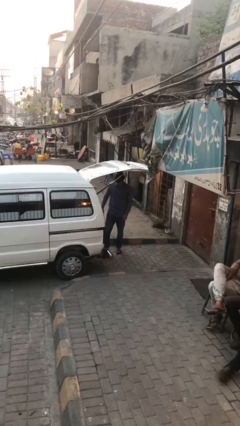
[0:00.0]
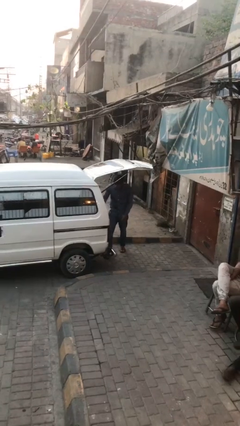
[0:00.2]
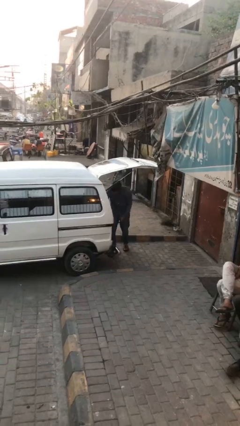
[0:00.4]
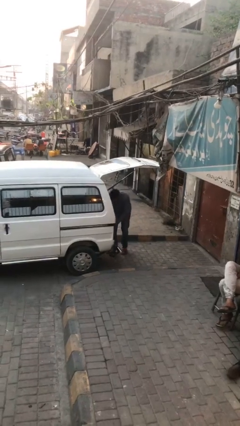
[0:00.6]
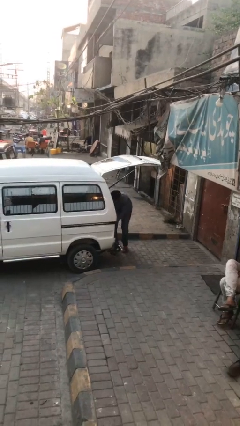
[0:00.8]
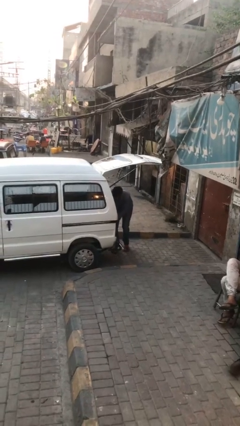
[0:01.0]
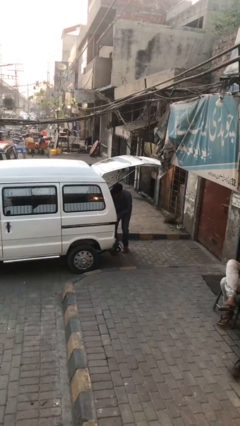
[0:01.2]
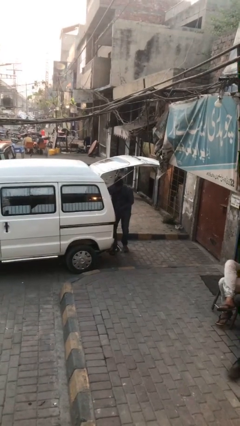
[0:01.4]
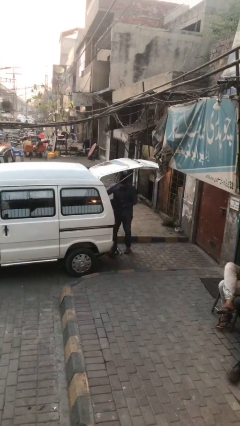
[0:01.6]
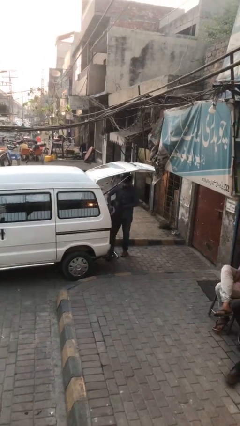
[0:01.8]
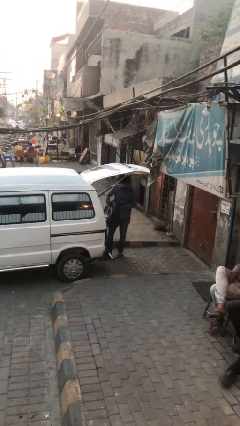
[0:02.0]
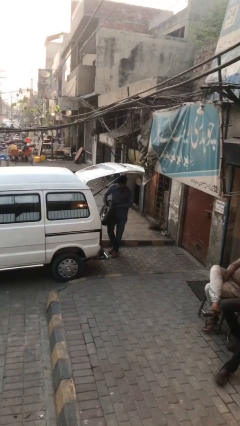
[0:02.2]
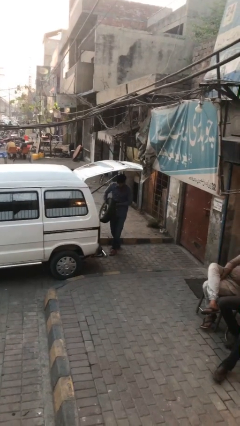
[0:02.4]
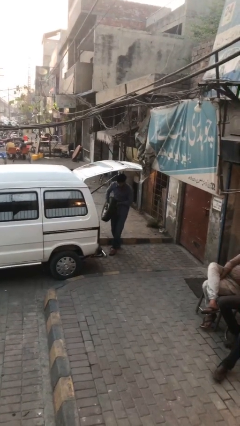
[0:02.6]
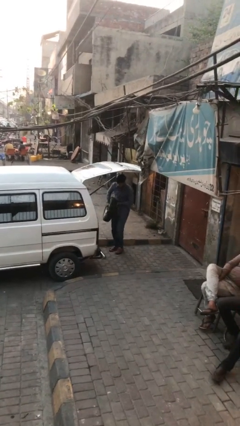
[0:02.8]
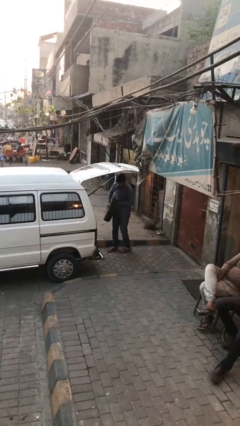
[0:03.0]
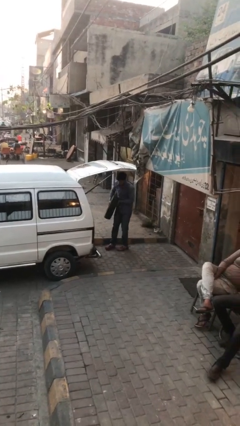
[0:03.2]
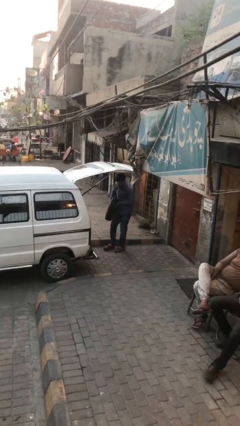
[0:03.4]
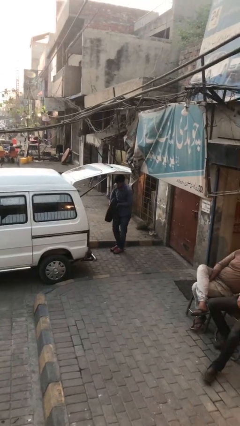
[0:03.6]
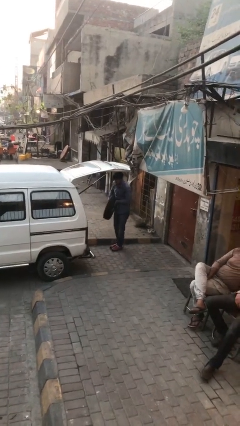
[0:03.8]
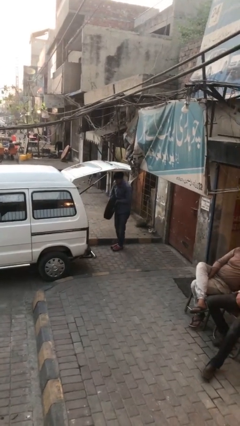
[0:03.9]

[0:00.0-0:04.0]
person unloads car

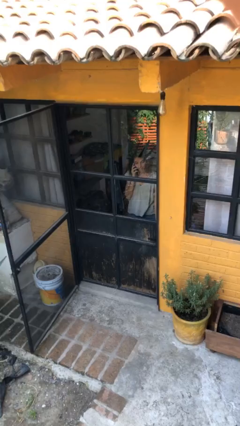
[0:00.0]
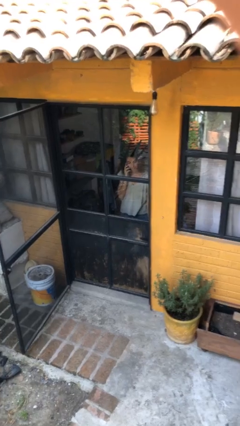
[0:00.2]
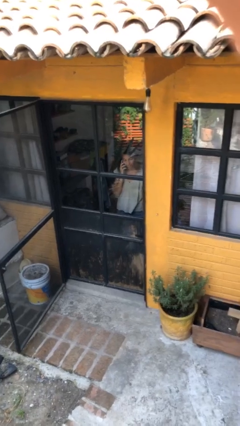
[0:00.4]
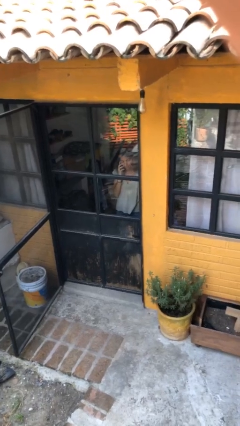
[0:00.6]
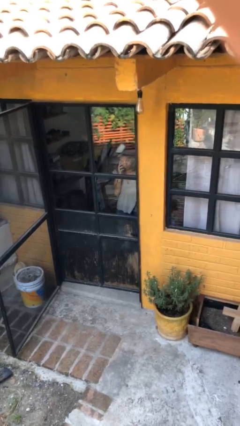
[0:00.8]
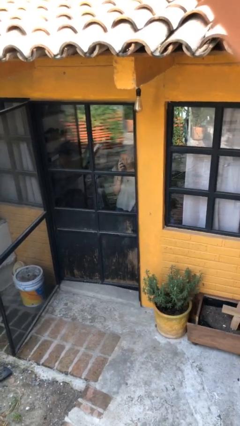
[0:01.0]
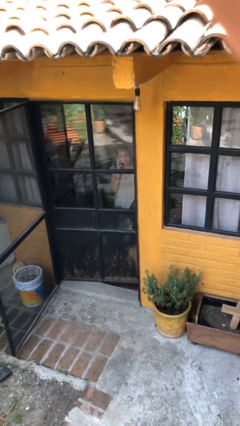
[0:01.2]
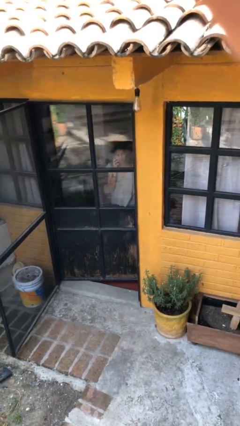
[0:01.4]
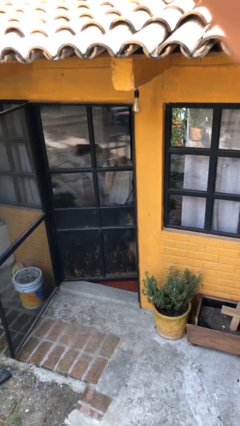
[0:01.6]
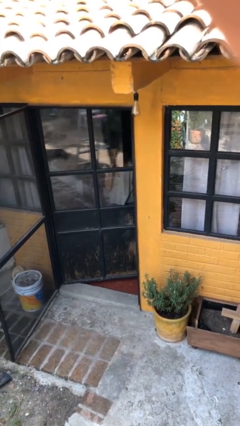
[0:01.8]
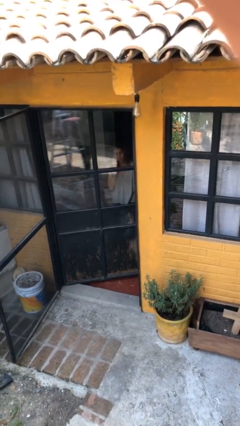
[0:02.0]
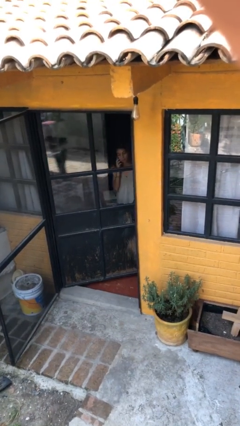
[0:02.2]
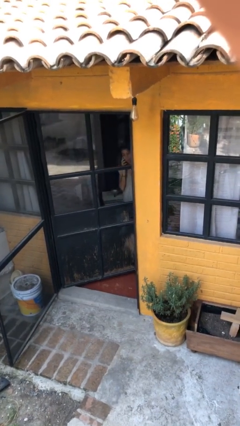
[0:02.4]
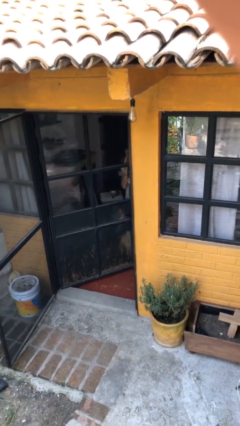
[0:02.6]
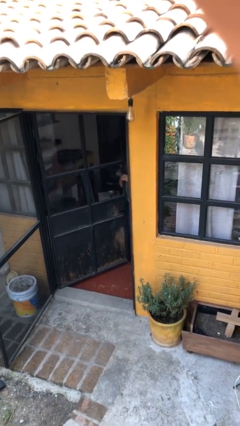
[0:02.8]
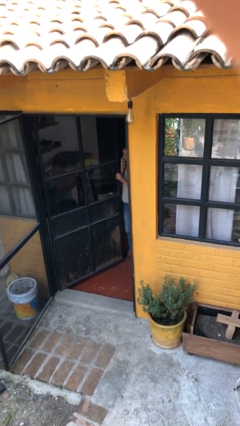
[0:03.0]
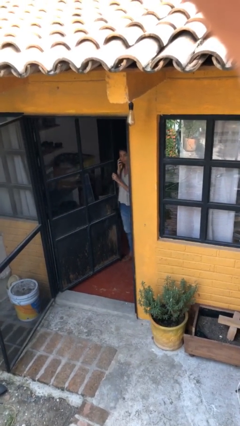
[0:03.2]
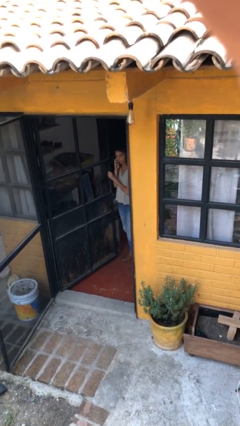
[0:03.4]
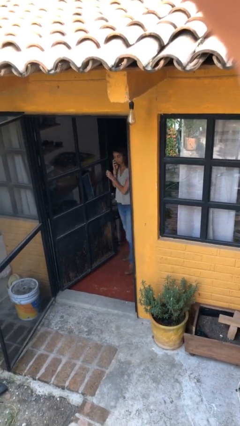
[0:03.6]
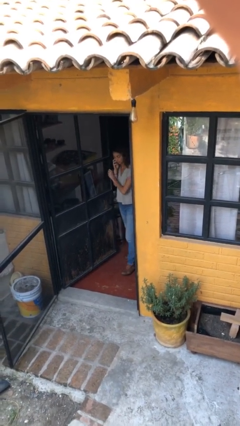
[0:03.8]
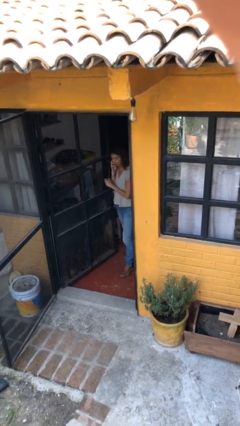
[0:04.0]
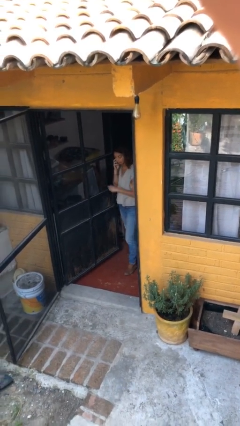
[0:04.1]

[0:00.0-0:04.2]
person opens facility door

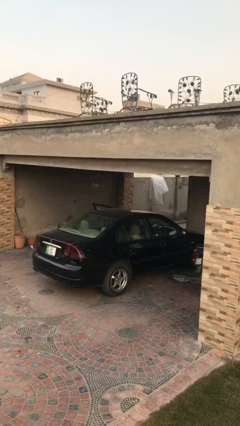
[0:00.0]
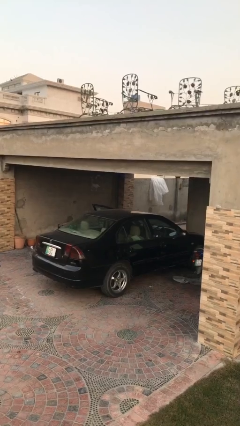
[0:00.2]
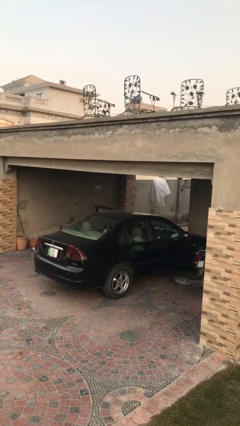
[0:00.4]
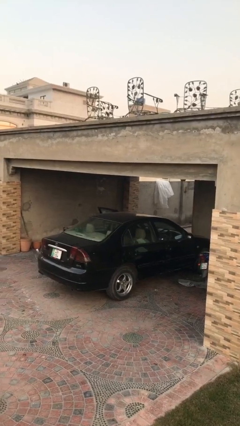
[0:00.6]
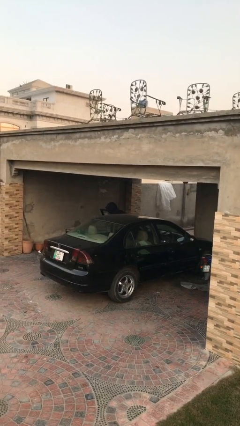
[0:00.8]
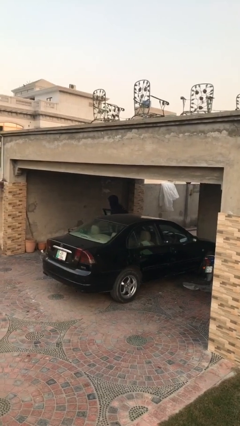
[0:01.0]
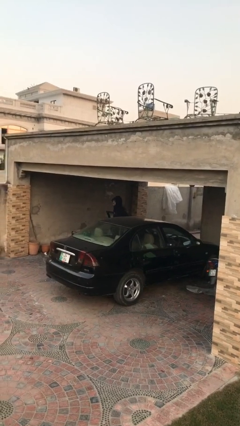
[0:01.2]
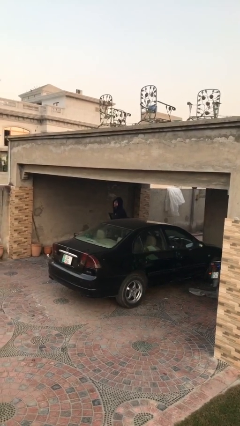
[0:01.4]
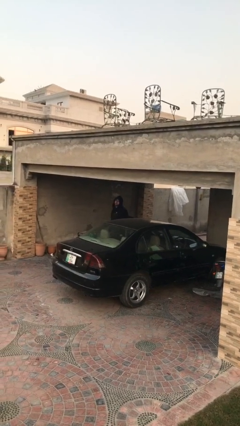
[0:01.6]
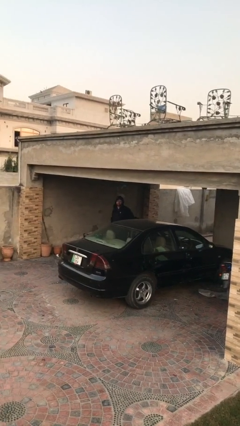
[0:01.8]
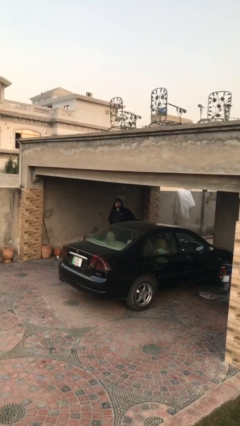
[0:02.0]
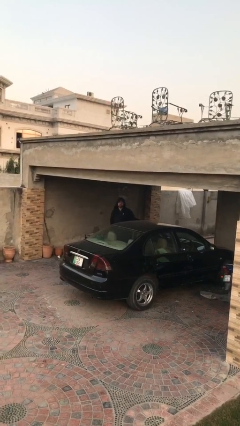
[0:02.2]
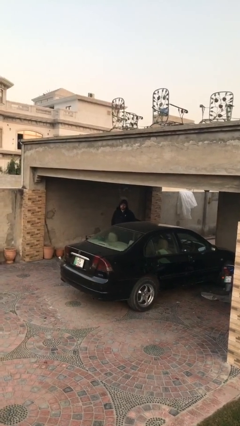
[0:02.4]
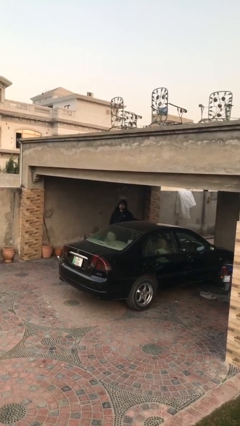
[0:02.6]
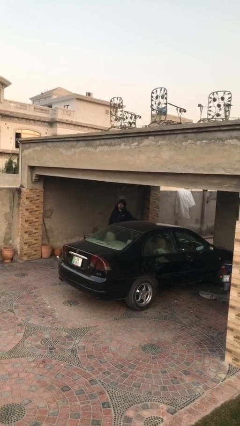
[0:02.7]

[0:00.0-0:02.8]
person exits car

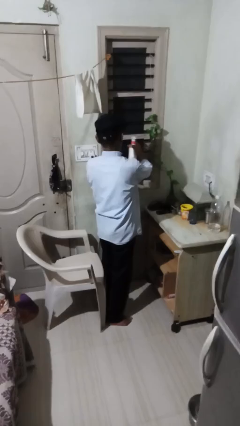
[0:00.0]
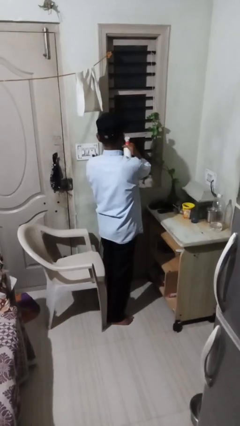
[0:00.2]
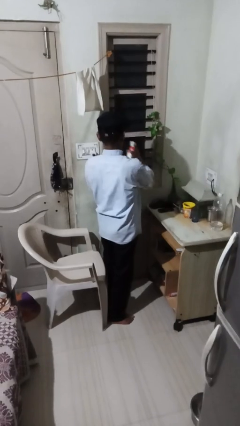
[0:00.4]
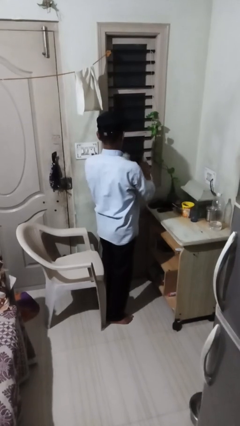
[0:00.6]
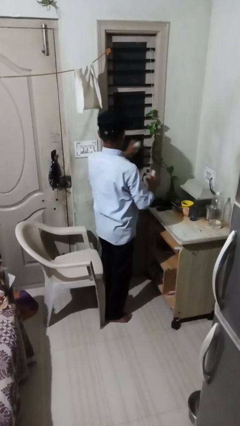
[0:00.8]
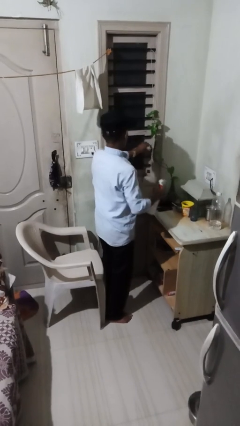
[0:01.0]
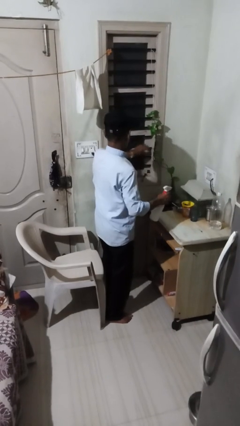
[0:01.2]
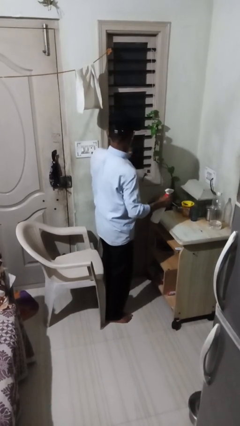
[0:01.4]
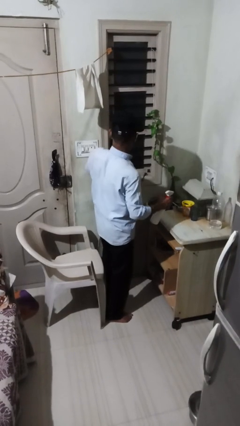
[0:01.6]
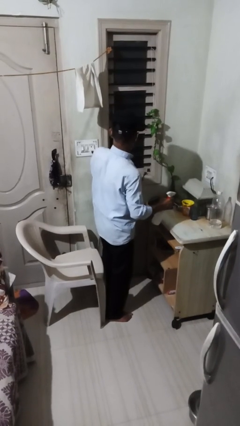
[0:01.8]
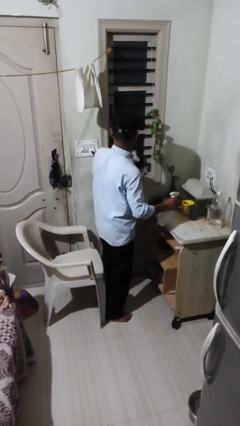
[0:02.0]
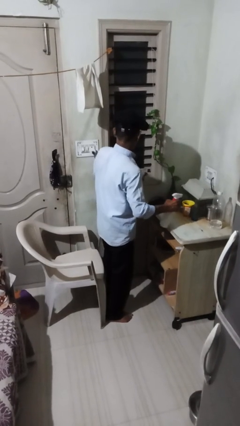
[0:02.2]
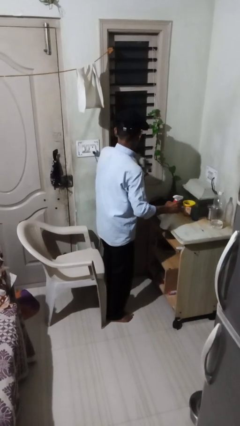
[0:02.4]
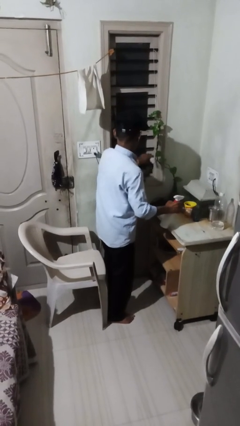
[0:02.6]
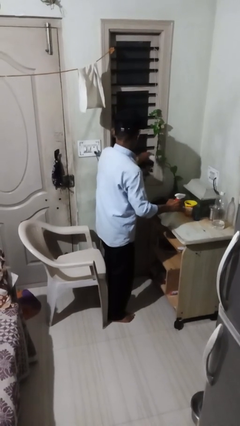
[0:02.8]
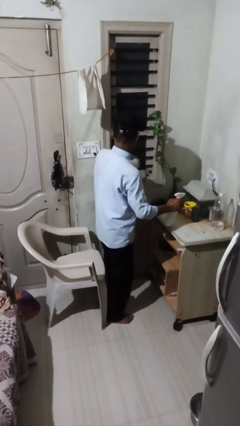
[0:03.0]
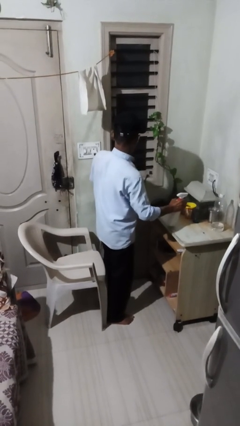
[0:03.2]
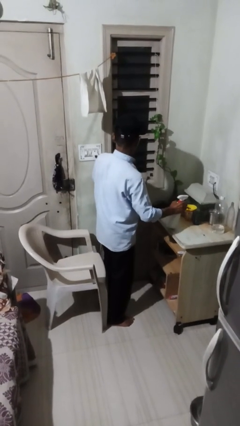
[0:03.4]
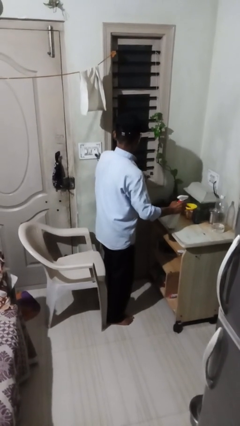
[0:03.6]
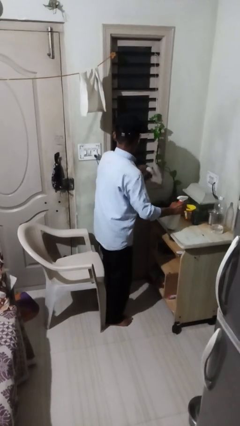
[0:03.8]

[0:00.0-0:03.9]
person washes window

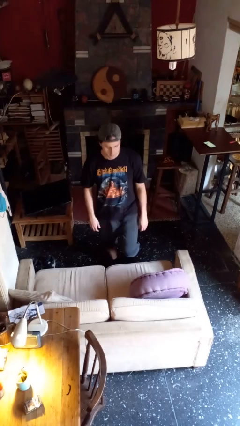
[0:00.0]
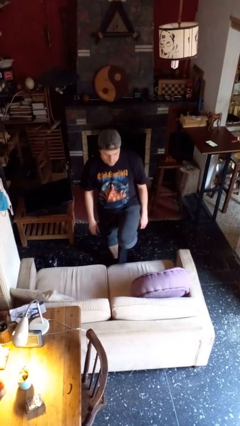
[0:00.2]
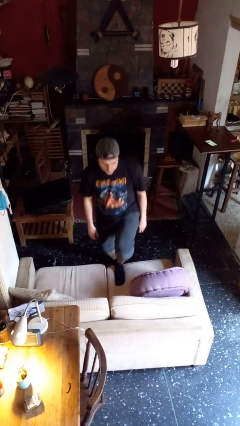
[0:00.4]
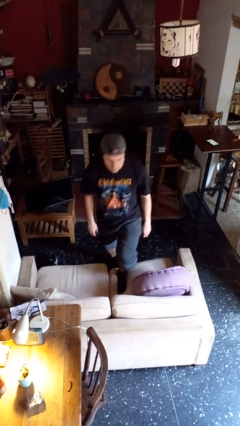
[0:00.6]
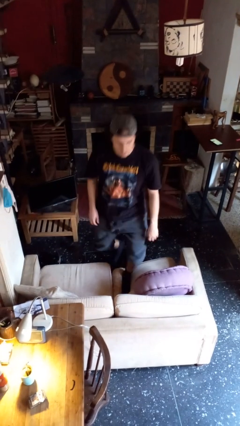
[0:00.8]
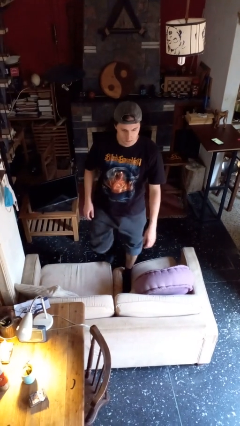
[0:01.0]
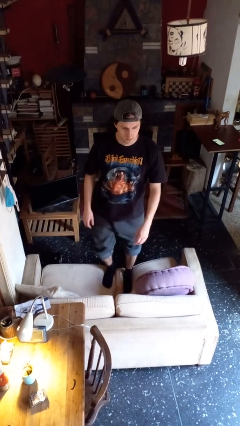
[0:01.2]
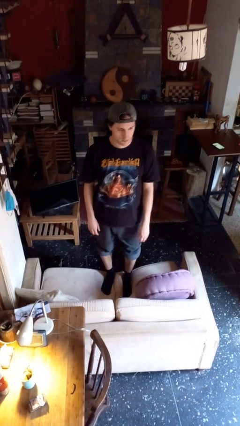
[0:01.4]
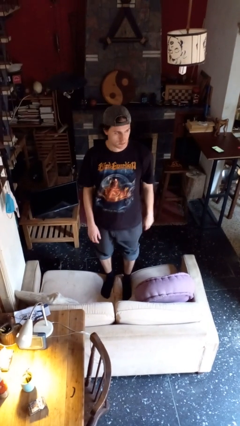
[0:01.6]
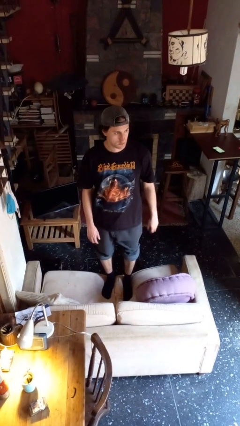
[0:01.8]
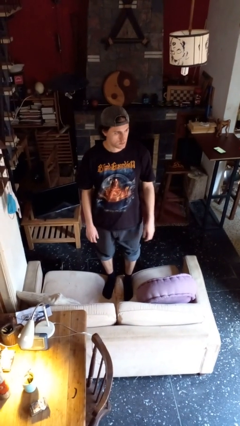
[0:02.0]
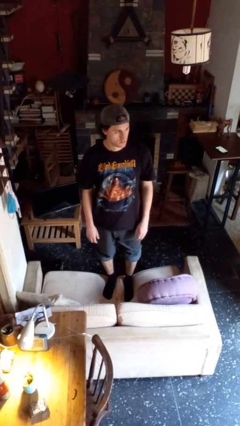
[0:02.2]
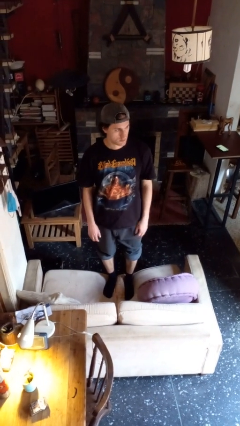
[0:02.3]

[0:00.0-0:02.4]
person climbs on couch

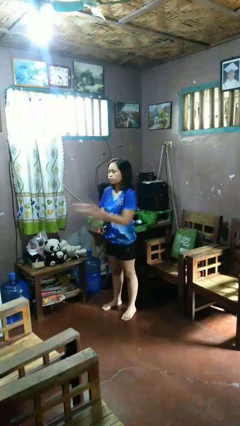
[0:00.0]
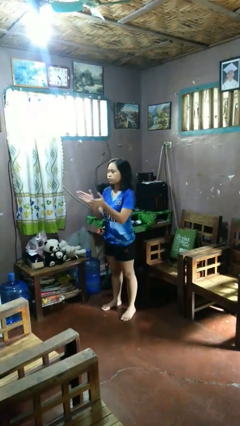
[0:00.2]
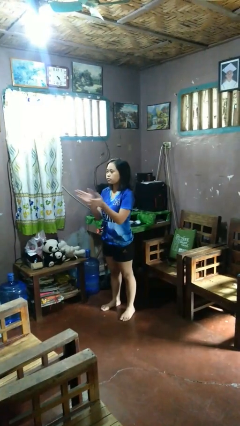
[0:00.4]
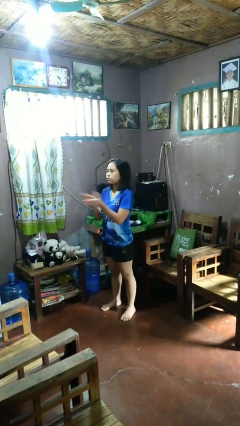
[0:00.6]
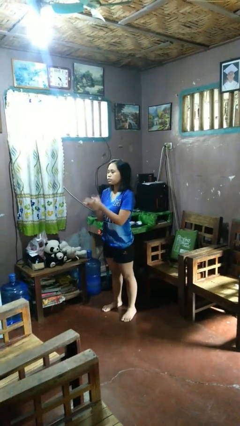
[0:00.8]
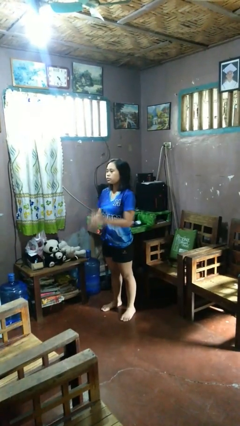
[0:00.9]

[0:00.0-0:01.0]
person claps hands
